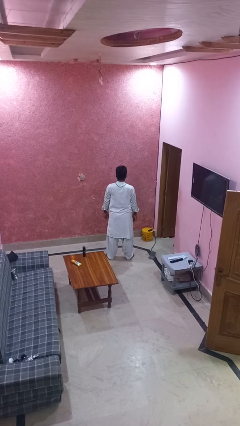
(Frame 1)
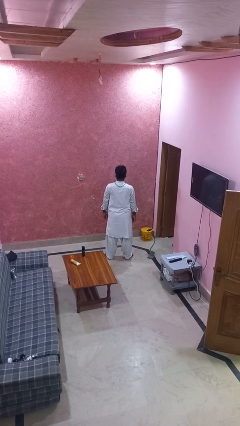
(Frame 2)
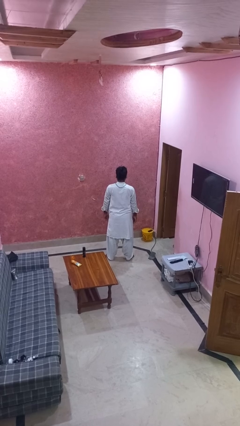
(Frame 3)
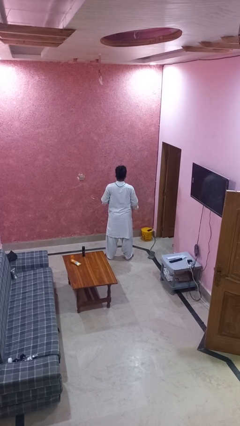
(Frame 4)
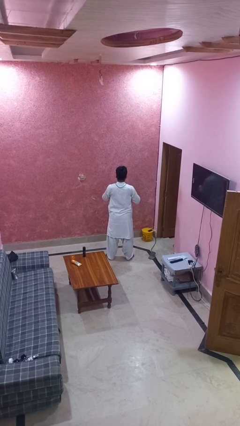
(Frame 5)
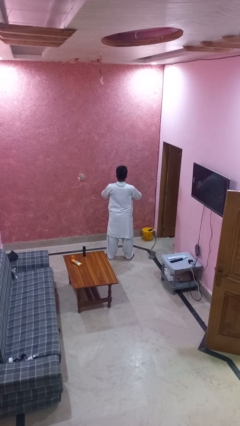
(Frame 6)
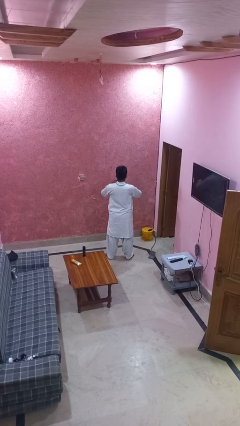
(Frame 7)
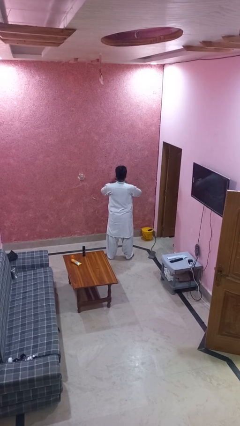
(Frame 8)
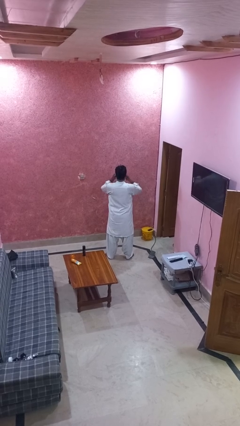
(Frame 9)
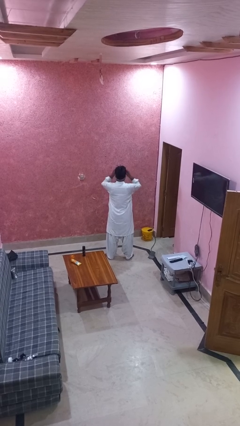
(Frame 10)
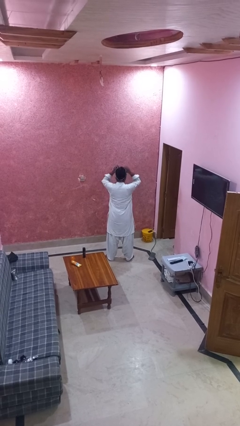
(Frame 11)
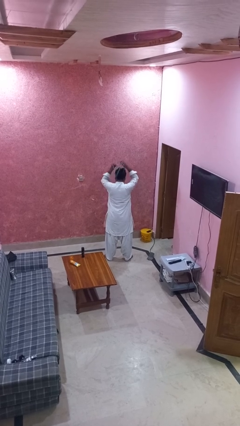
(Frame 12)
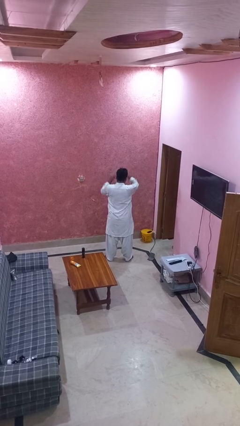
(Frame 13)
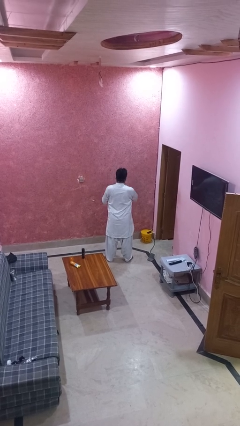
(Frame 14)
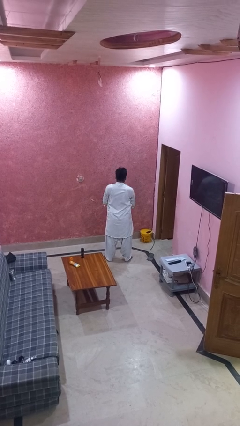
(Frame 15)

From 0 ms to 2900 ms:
person takes off necklace

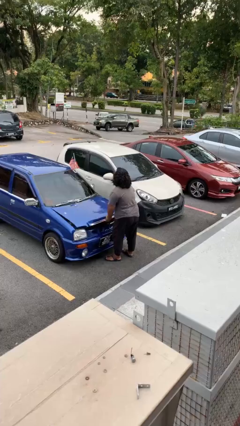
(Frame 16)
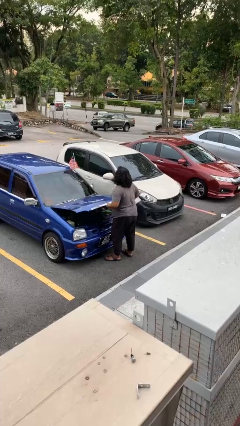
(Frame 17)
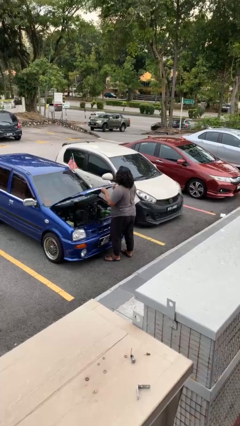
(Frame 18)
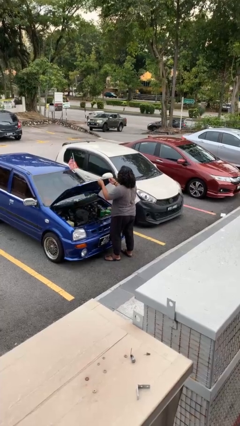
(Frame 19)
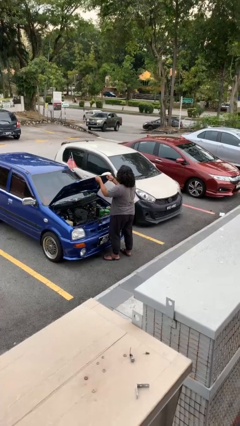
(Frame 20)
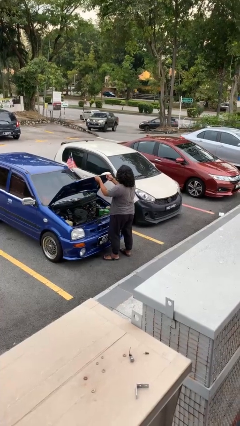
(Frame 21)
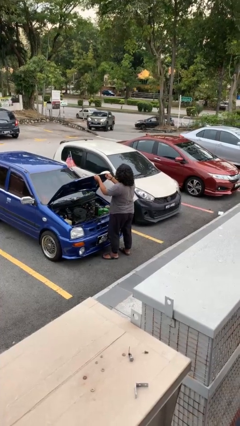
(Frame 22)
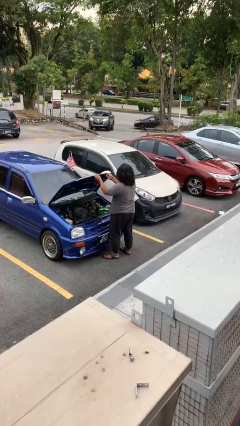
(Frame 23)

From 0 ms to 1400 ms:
person opens car hood

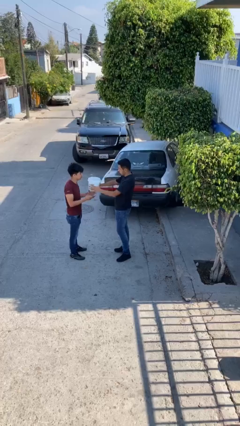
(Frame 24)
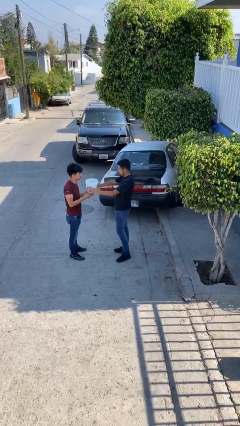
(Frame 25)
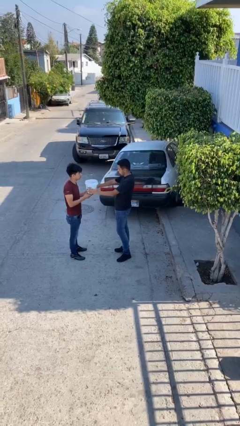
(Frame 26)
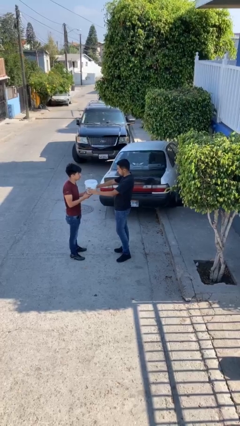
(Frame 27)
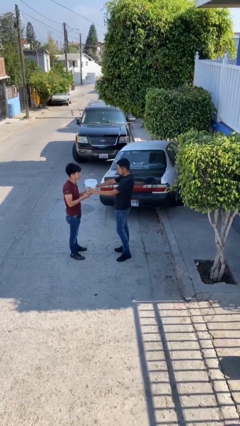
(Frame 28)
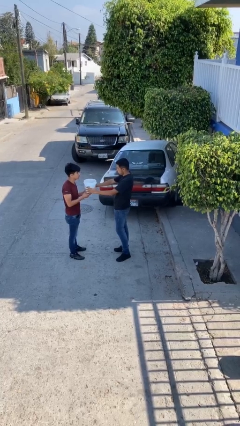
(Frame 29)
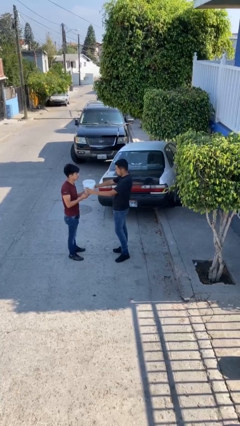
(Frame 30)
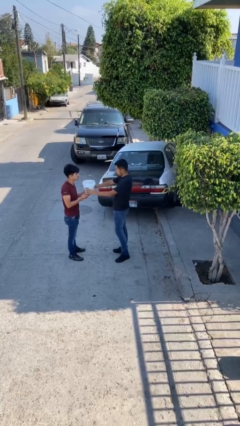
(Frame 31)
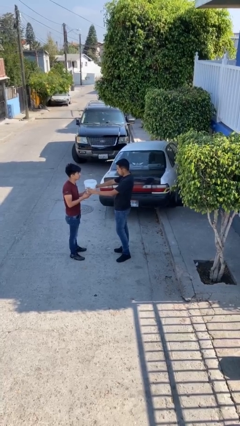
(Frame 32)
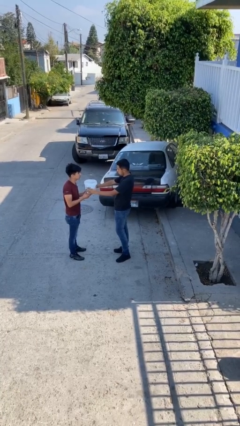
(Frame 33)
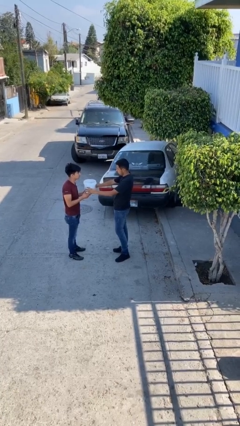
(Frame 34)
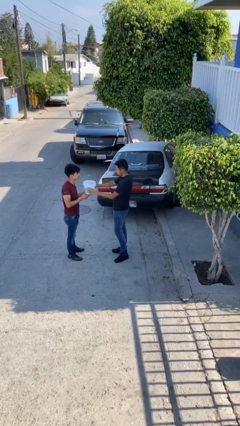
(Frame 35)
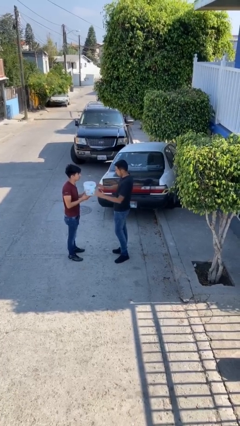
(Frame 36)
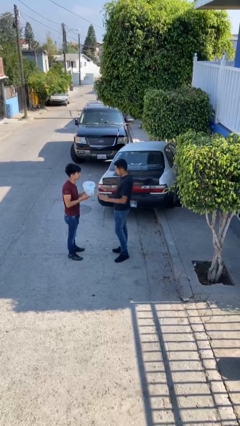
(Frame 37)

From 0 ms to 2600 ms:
person transfers object to person

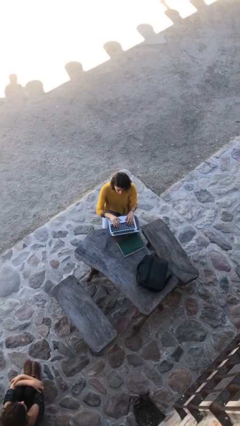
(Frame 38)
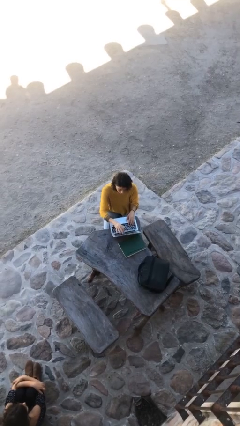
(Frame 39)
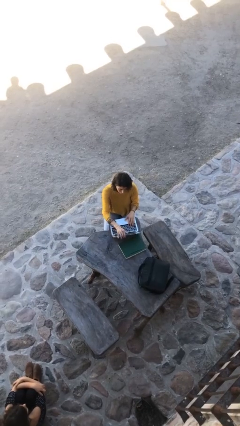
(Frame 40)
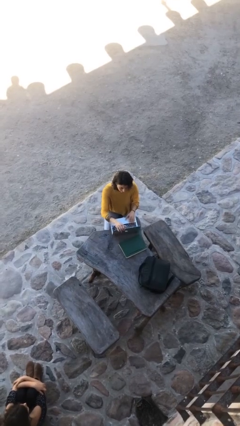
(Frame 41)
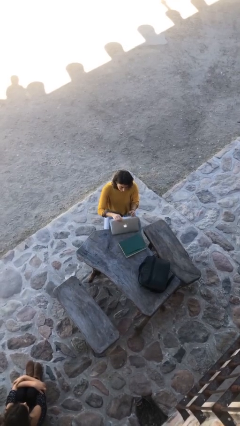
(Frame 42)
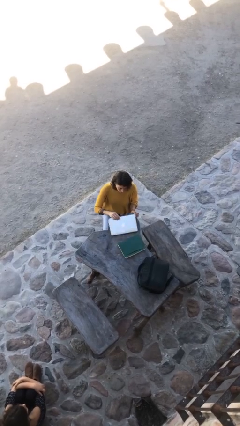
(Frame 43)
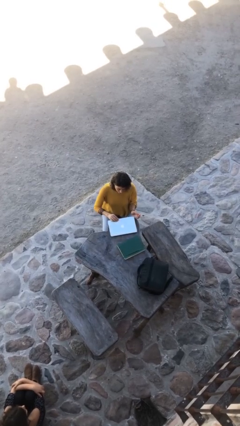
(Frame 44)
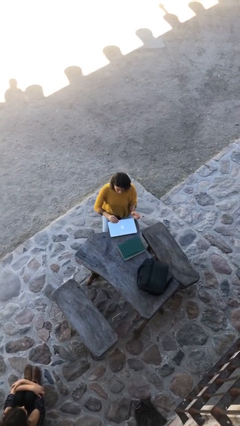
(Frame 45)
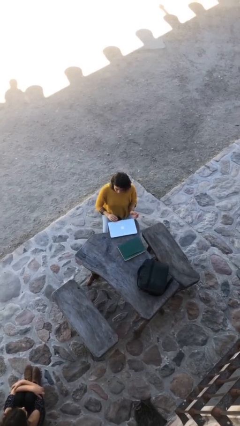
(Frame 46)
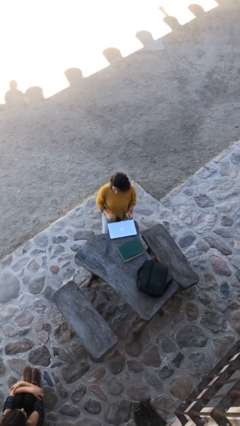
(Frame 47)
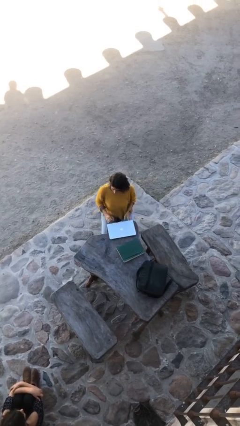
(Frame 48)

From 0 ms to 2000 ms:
person interacts with laptop

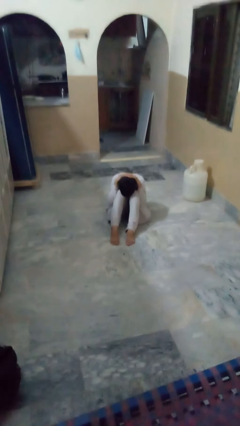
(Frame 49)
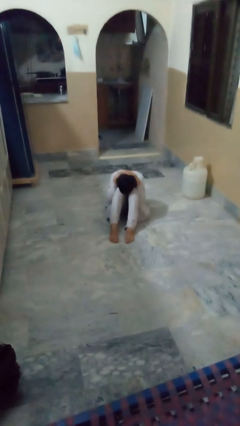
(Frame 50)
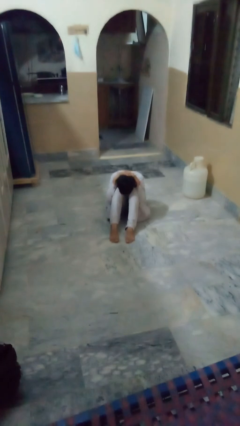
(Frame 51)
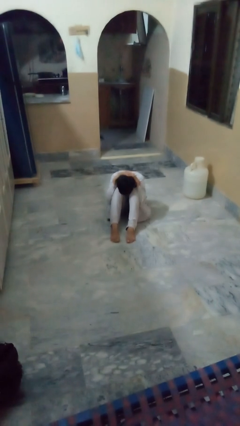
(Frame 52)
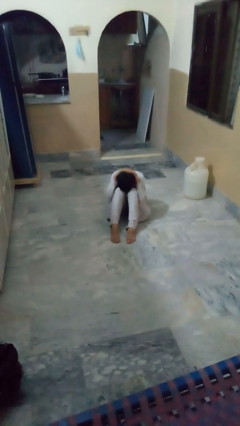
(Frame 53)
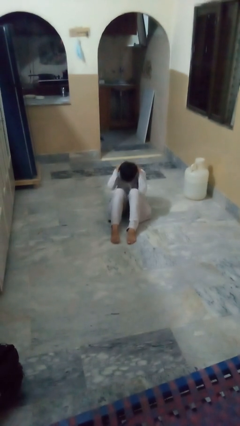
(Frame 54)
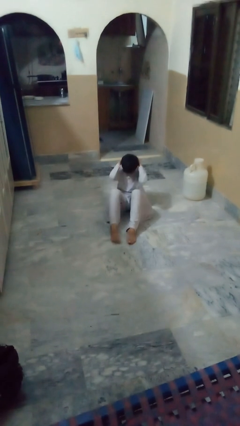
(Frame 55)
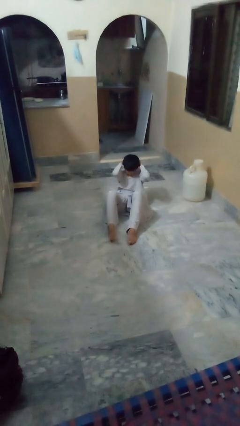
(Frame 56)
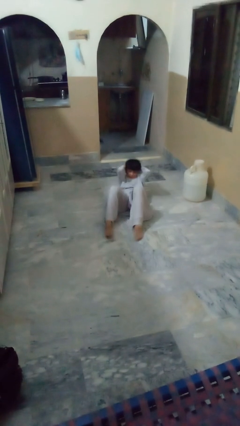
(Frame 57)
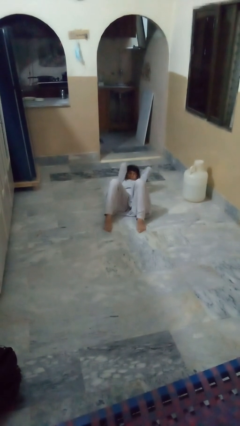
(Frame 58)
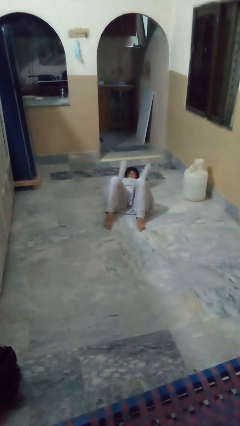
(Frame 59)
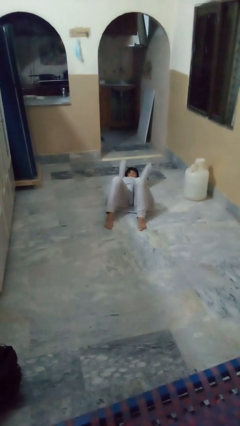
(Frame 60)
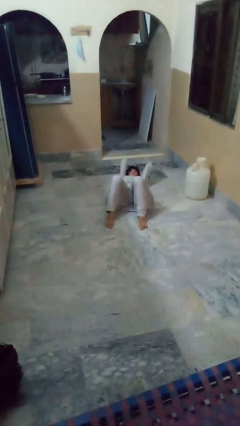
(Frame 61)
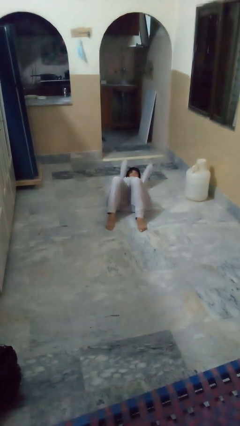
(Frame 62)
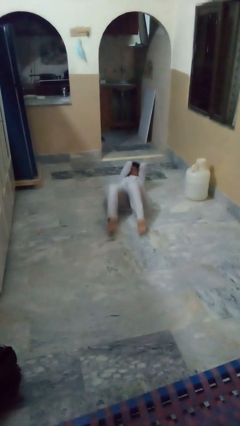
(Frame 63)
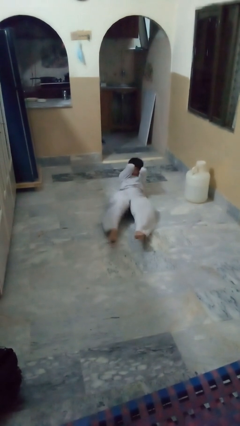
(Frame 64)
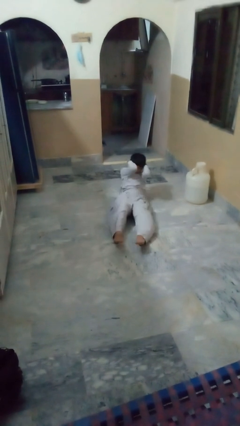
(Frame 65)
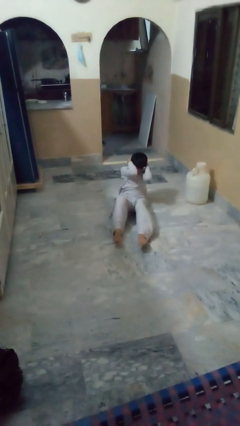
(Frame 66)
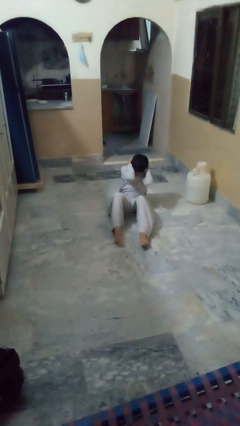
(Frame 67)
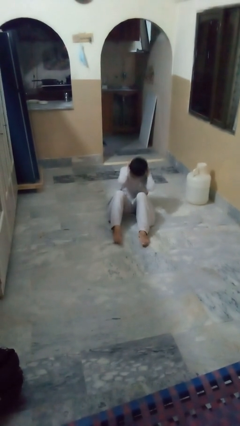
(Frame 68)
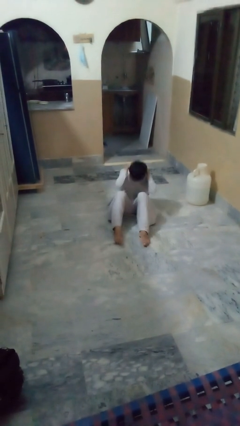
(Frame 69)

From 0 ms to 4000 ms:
person exercises with situp

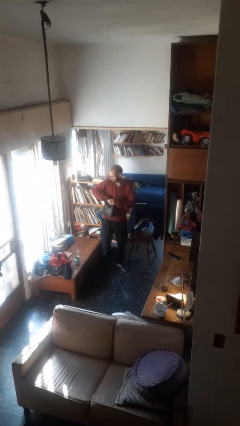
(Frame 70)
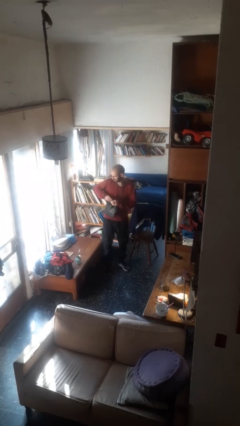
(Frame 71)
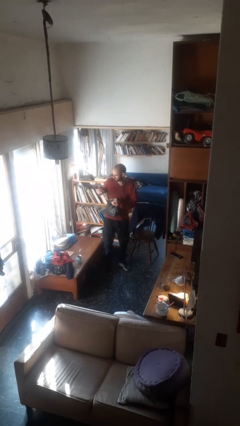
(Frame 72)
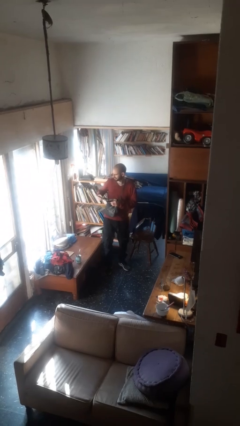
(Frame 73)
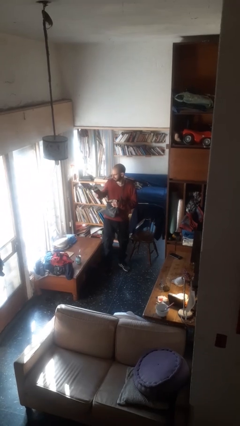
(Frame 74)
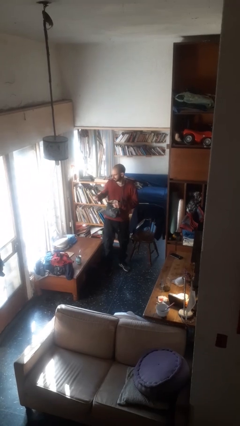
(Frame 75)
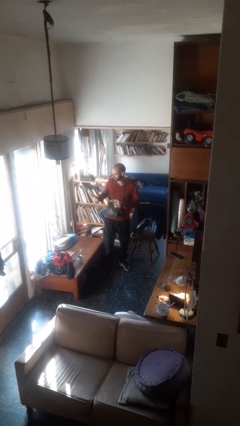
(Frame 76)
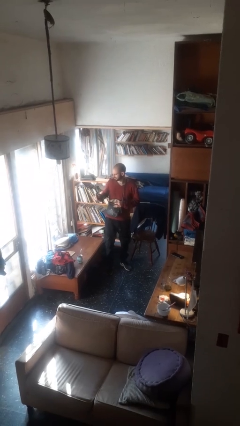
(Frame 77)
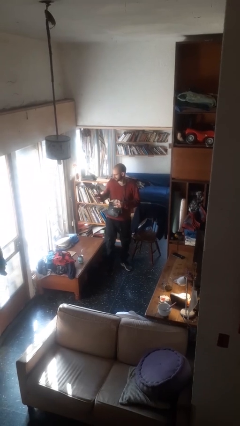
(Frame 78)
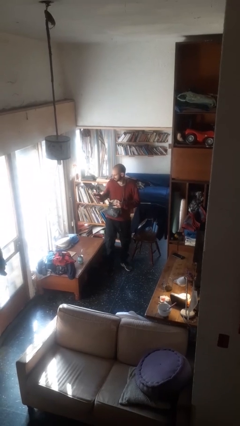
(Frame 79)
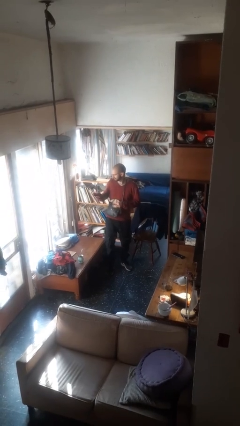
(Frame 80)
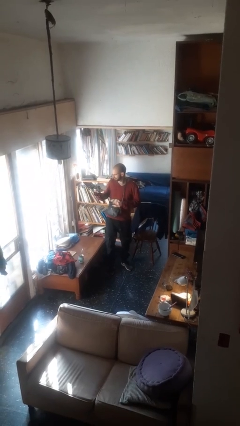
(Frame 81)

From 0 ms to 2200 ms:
person takes object from purse

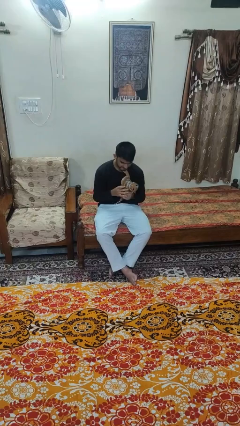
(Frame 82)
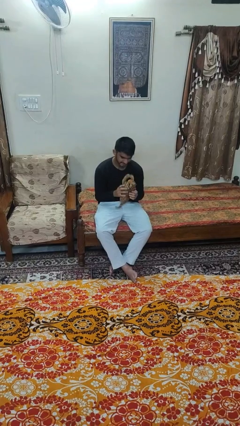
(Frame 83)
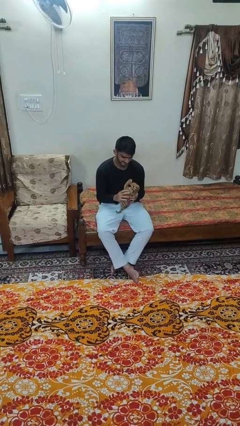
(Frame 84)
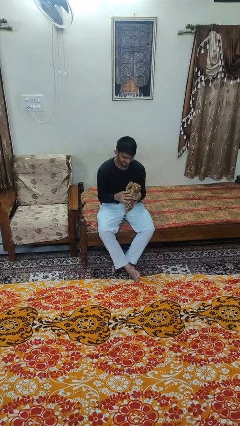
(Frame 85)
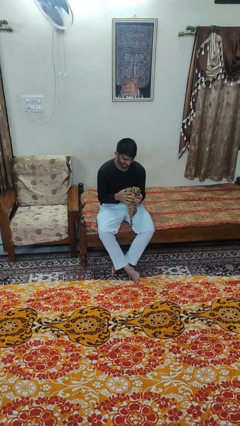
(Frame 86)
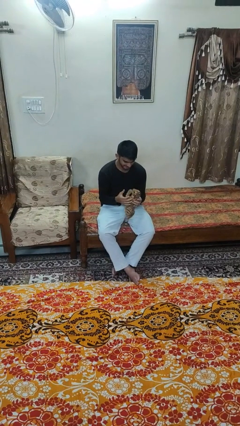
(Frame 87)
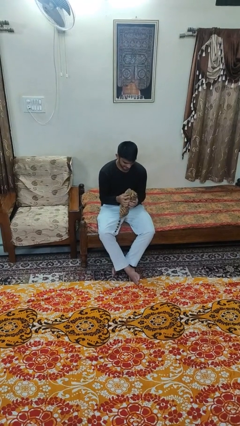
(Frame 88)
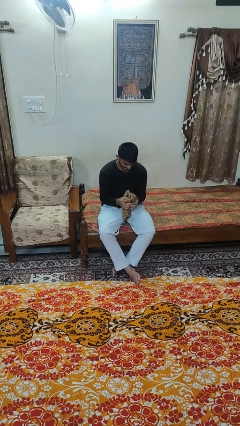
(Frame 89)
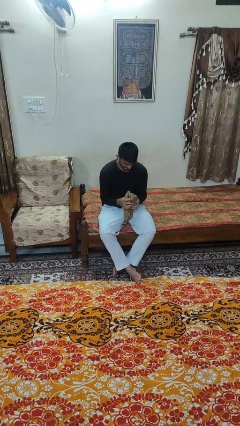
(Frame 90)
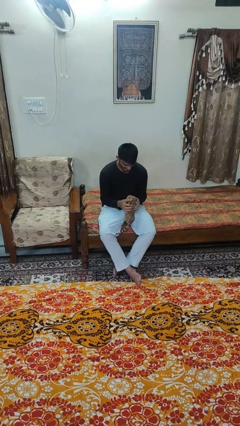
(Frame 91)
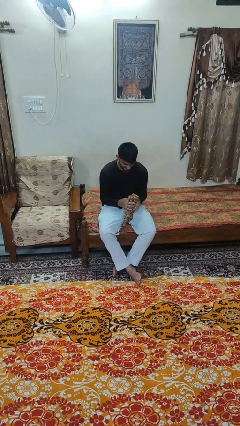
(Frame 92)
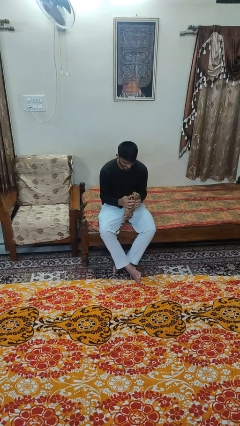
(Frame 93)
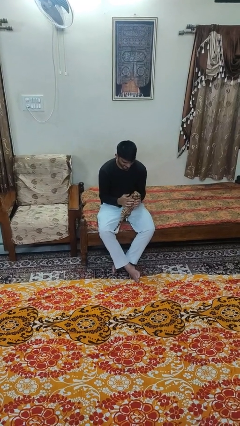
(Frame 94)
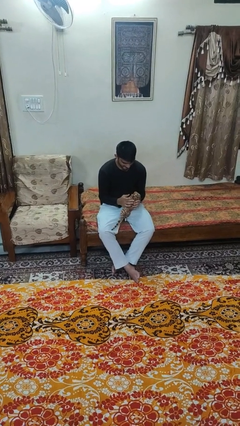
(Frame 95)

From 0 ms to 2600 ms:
person hugs stuffed animal
